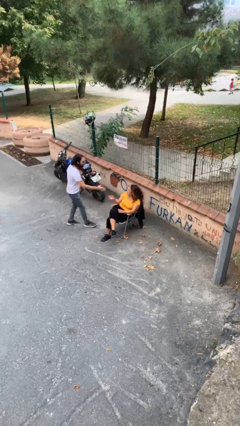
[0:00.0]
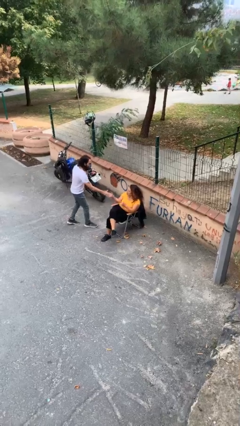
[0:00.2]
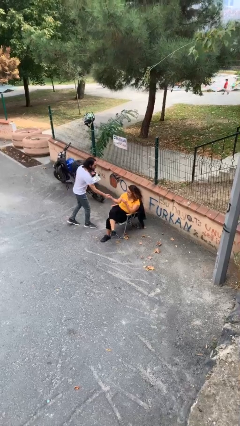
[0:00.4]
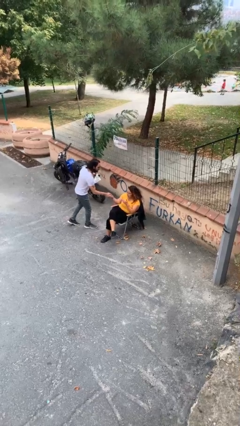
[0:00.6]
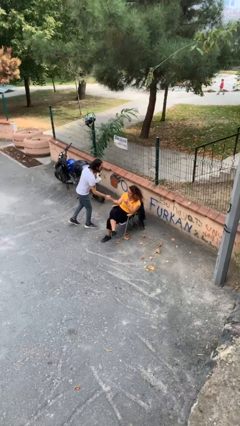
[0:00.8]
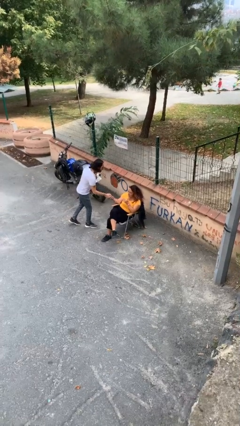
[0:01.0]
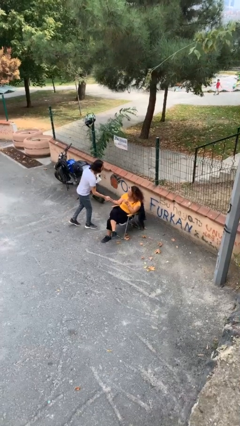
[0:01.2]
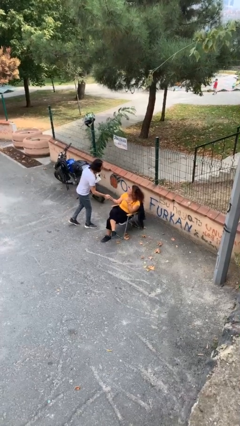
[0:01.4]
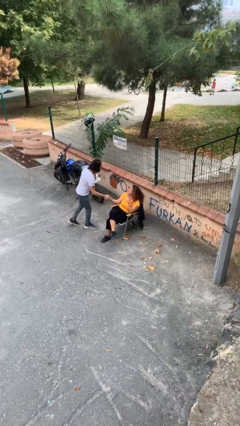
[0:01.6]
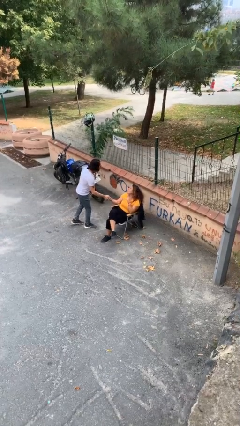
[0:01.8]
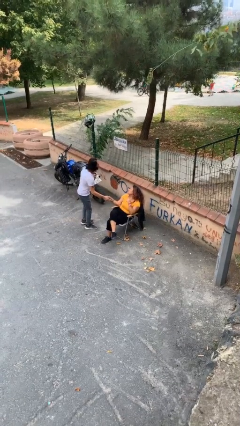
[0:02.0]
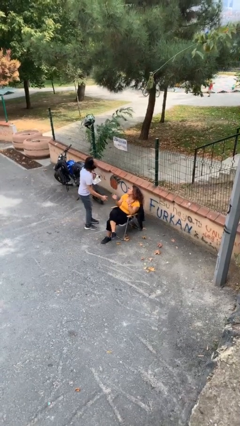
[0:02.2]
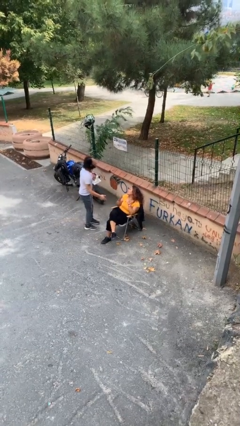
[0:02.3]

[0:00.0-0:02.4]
person shakes hand

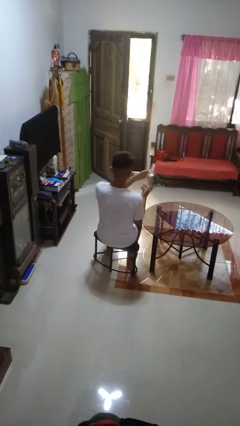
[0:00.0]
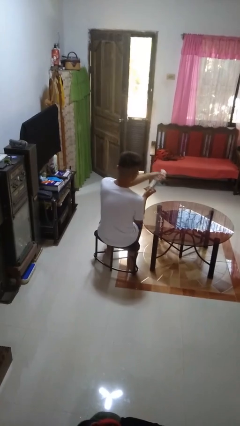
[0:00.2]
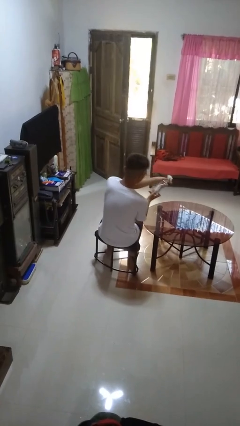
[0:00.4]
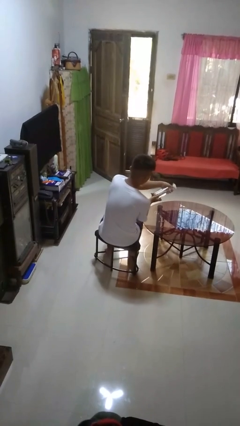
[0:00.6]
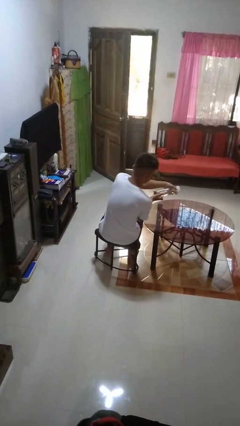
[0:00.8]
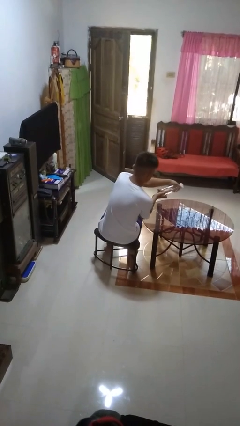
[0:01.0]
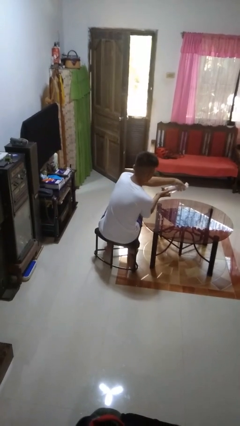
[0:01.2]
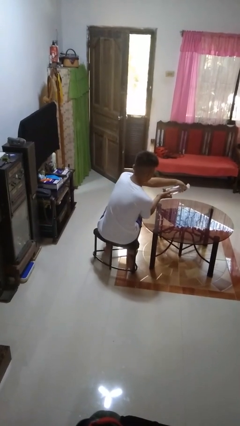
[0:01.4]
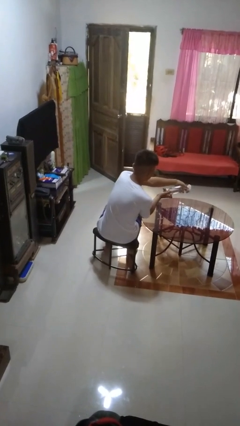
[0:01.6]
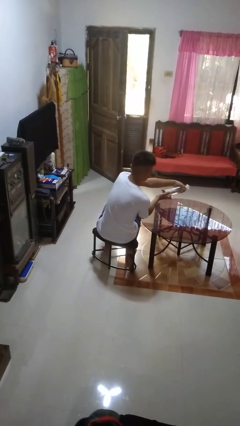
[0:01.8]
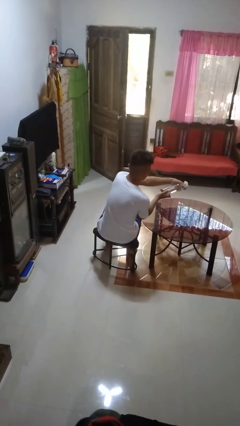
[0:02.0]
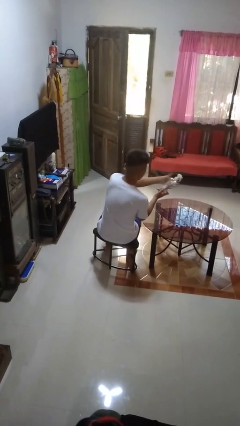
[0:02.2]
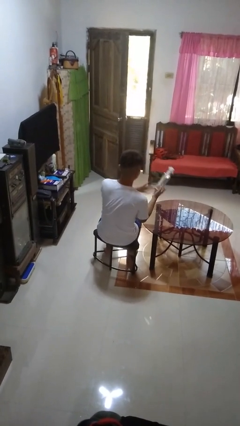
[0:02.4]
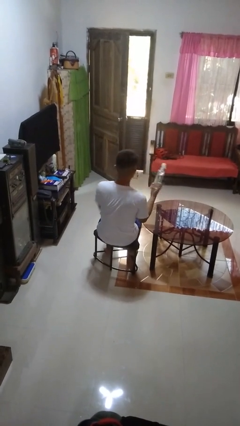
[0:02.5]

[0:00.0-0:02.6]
person sprays from bottle

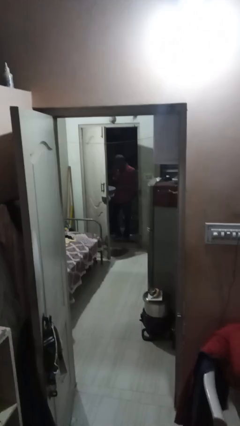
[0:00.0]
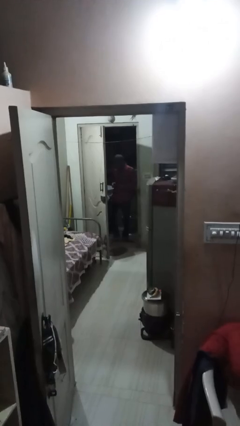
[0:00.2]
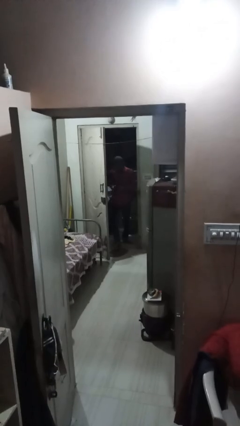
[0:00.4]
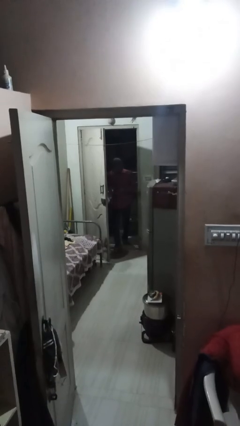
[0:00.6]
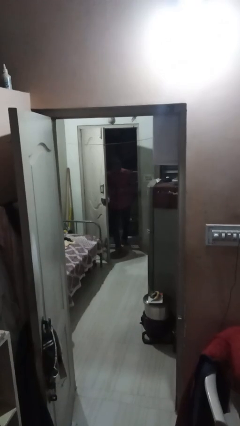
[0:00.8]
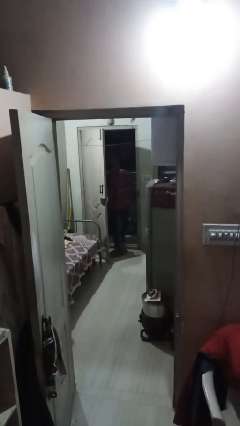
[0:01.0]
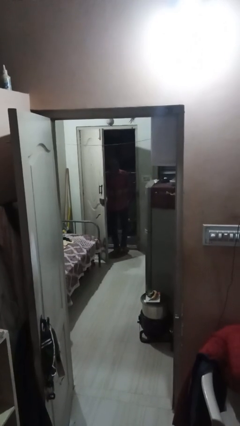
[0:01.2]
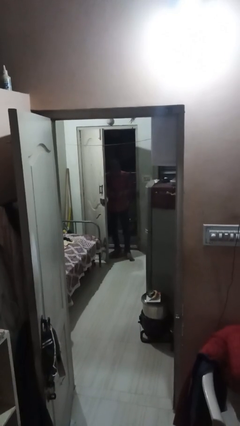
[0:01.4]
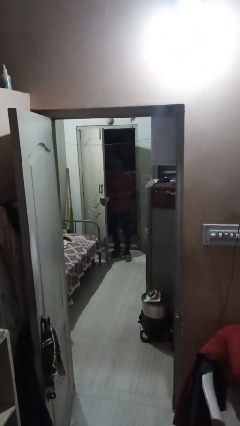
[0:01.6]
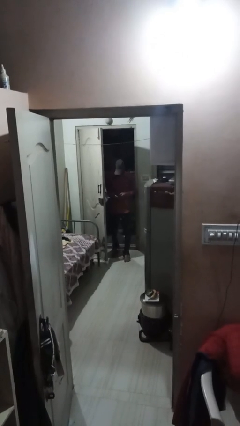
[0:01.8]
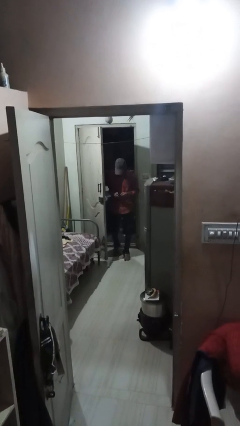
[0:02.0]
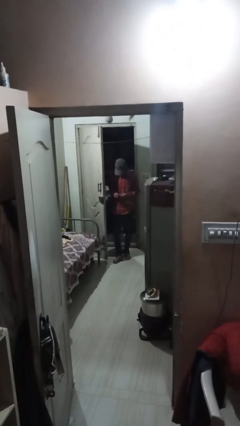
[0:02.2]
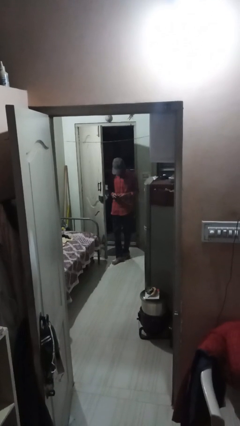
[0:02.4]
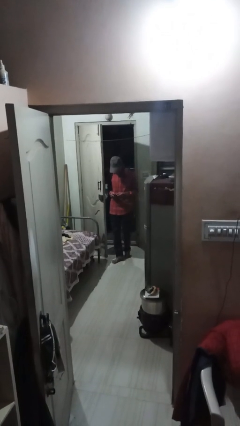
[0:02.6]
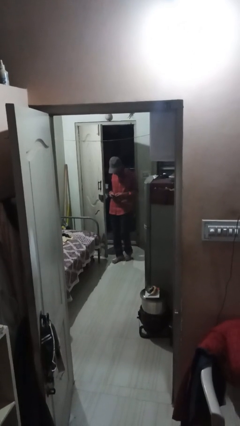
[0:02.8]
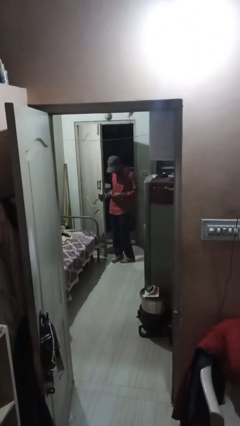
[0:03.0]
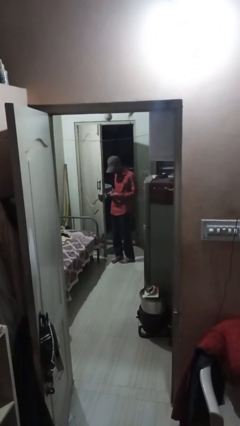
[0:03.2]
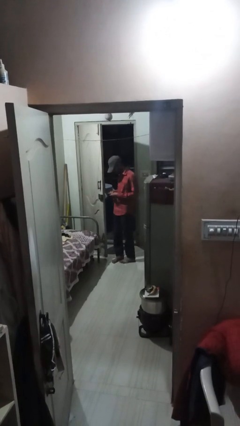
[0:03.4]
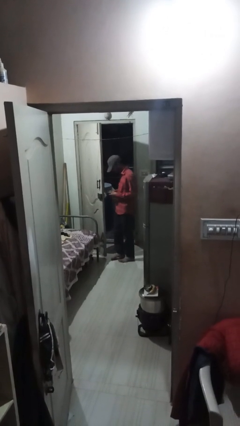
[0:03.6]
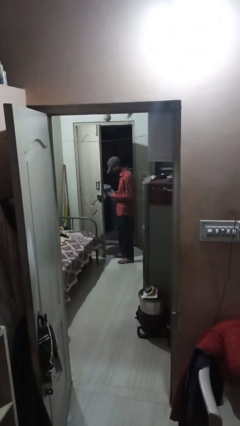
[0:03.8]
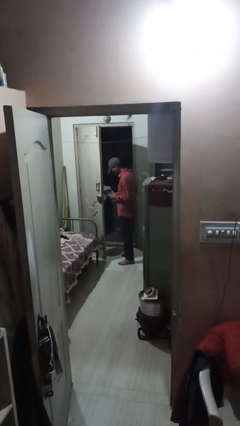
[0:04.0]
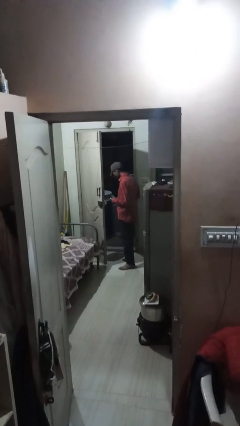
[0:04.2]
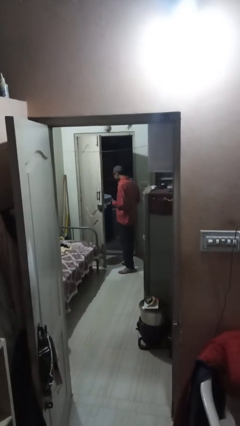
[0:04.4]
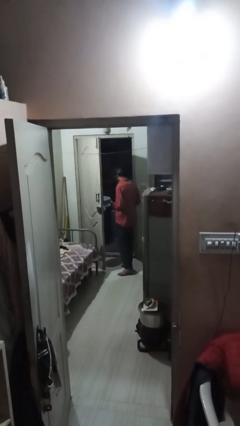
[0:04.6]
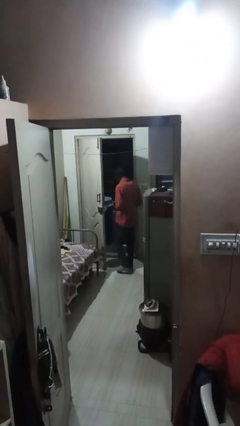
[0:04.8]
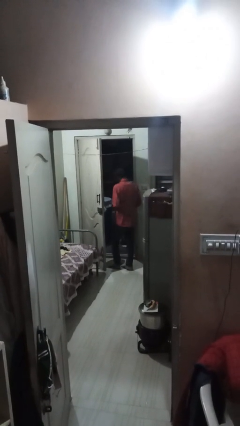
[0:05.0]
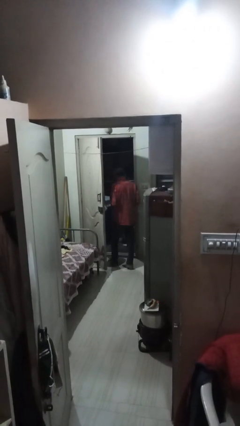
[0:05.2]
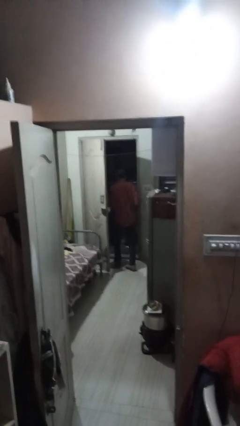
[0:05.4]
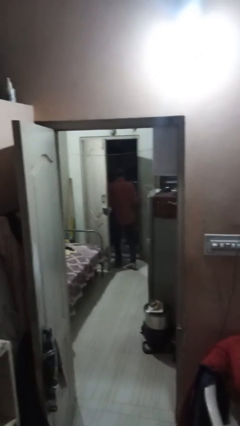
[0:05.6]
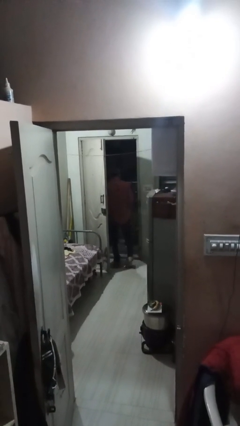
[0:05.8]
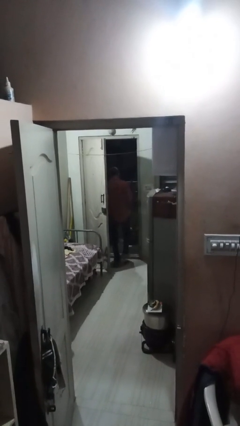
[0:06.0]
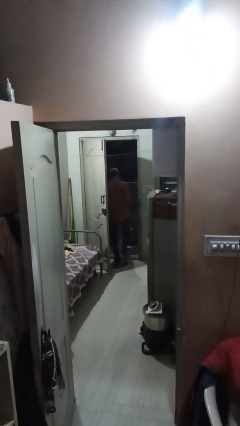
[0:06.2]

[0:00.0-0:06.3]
person enters scene through structure

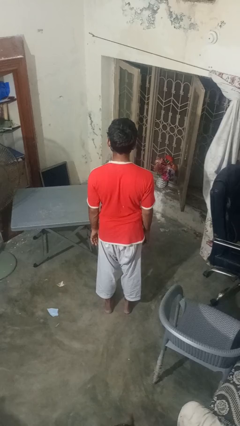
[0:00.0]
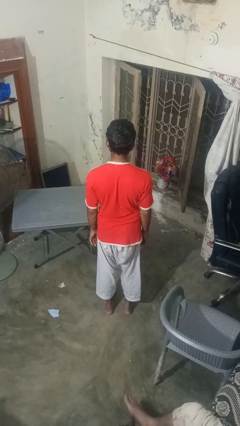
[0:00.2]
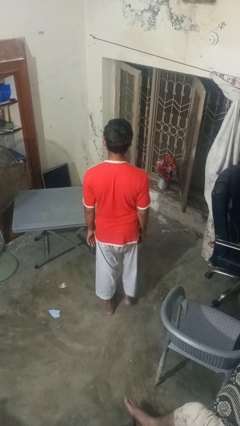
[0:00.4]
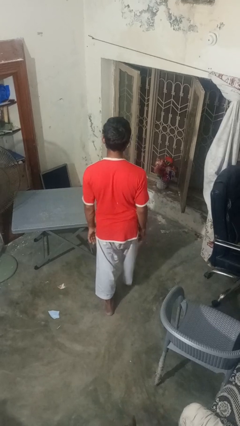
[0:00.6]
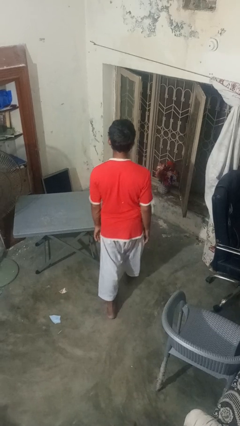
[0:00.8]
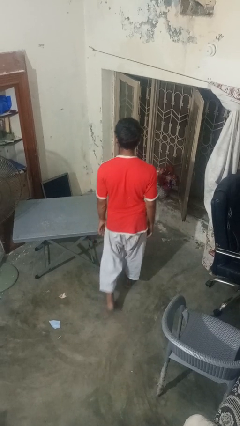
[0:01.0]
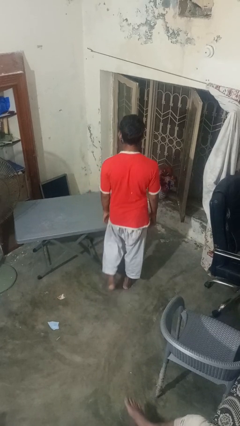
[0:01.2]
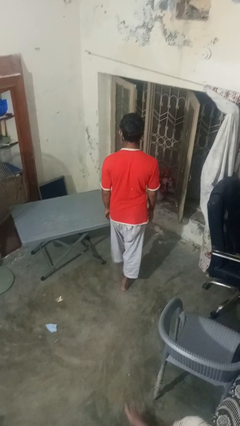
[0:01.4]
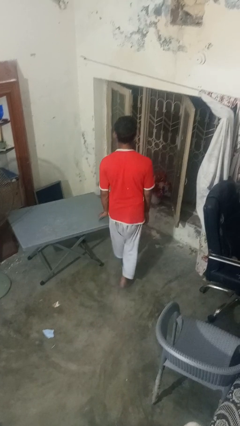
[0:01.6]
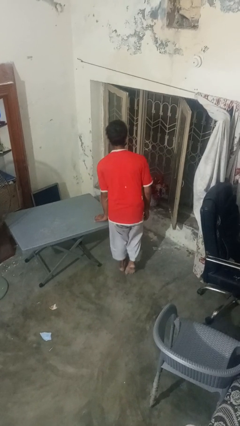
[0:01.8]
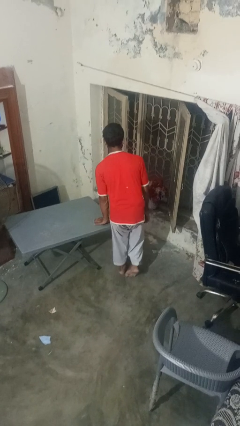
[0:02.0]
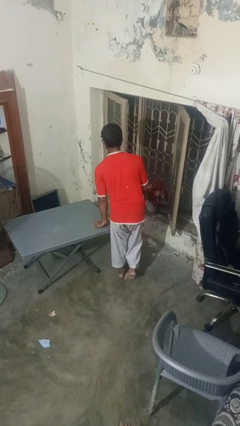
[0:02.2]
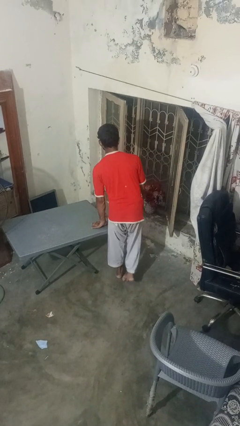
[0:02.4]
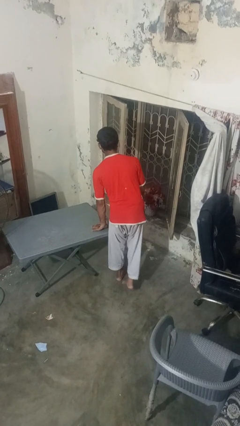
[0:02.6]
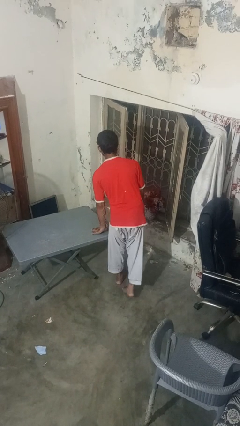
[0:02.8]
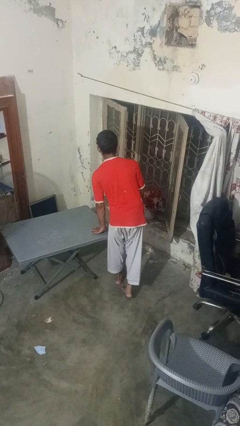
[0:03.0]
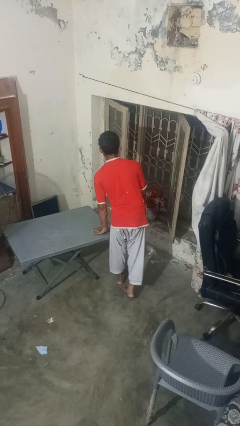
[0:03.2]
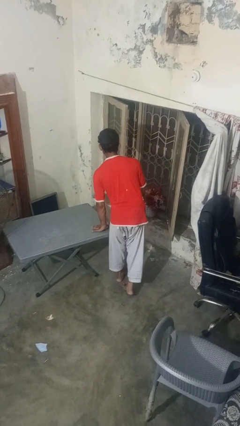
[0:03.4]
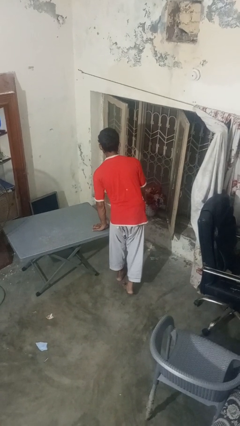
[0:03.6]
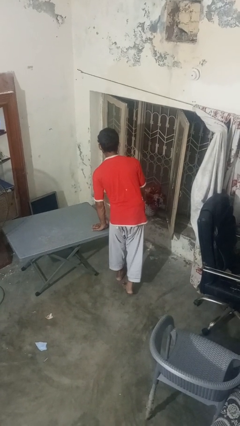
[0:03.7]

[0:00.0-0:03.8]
person bumps into table

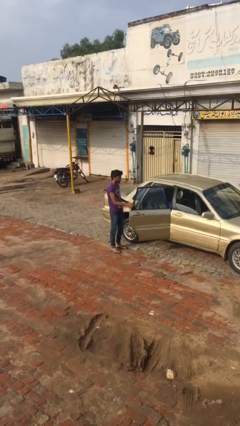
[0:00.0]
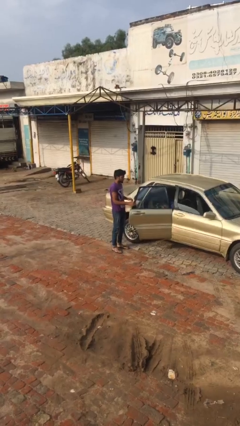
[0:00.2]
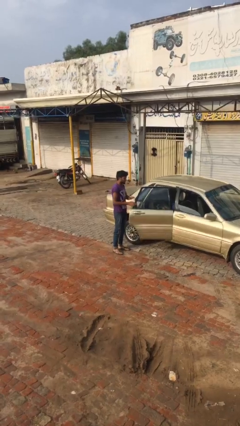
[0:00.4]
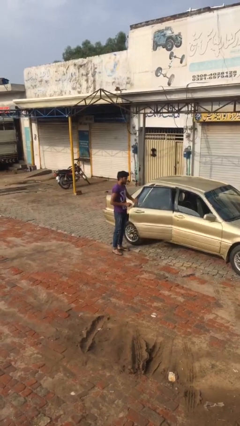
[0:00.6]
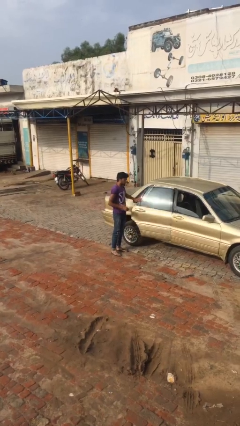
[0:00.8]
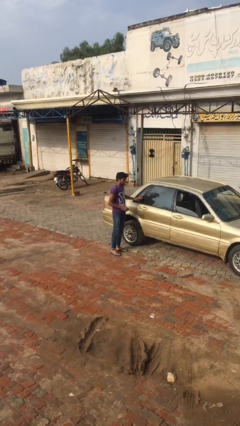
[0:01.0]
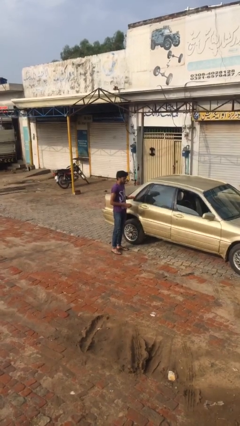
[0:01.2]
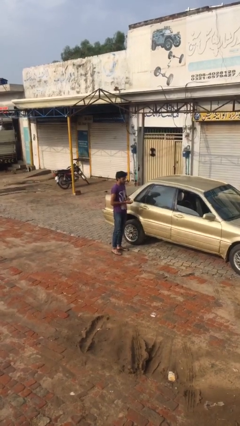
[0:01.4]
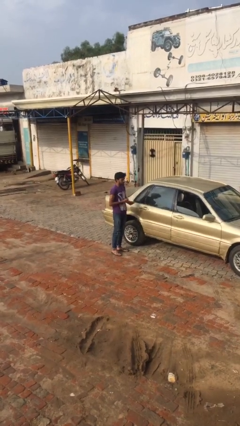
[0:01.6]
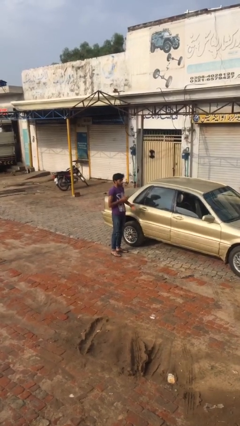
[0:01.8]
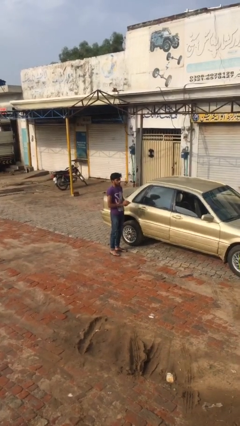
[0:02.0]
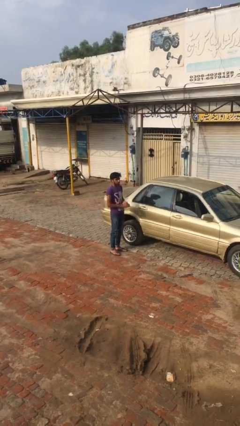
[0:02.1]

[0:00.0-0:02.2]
person closes car door

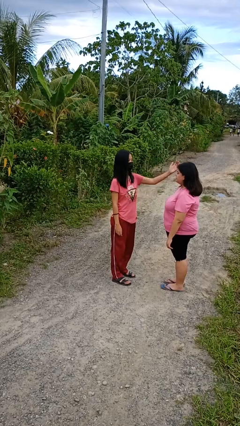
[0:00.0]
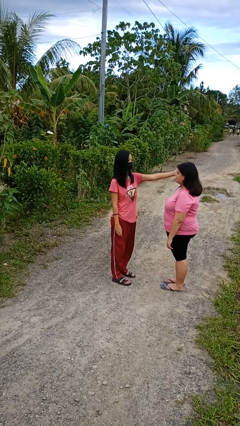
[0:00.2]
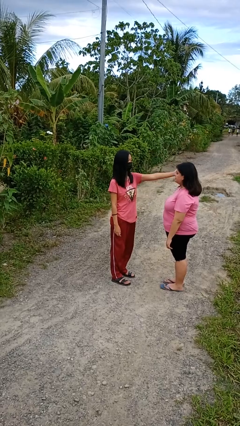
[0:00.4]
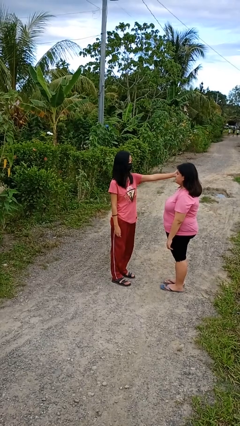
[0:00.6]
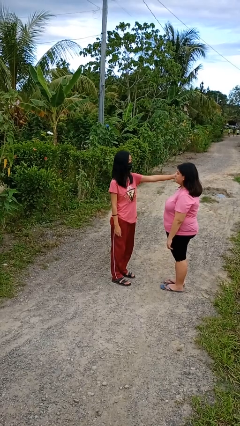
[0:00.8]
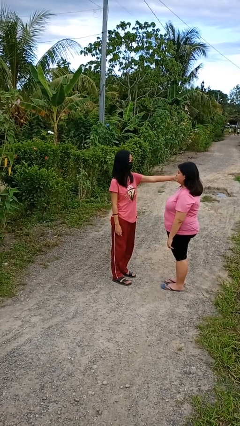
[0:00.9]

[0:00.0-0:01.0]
person touches face of person
